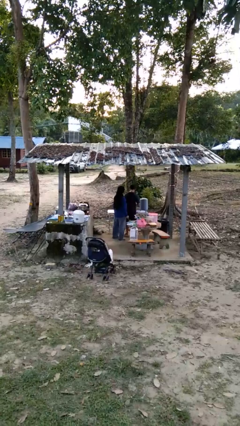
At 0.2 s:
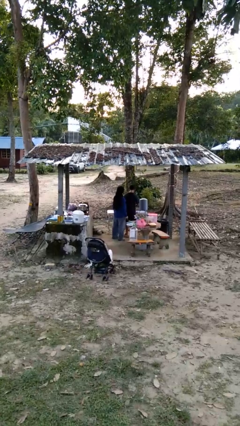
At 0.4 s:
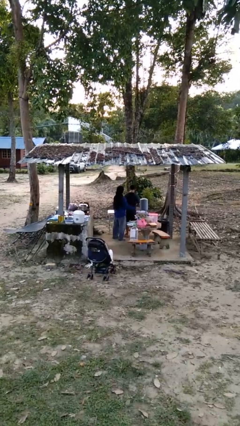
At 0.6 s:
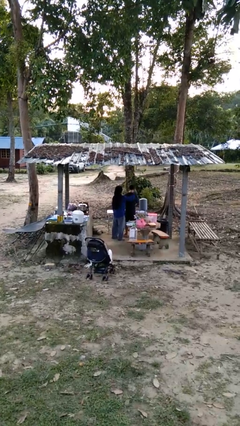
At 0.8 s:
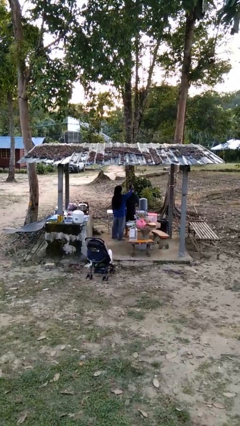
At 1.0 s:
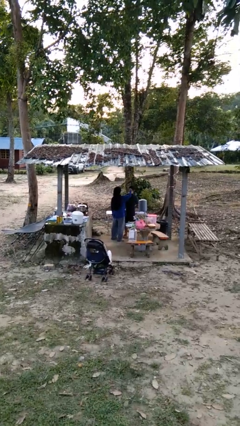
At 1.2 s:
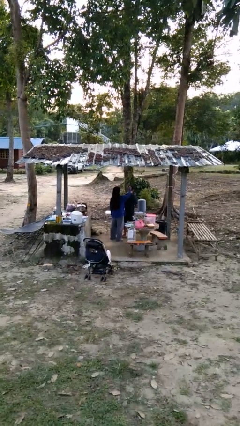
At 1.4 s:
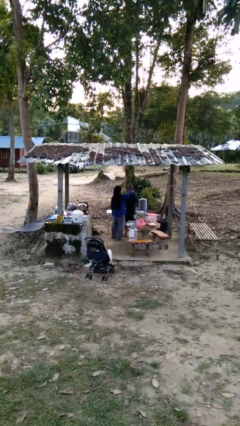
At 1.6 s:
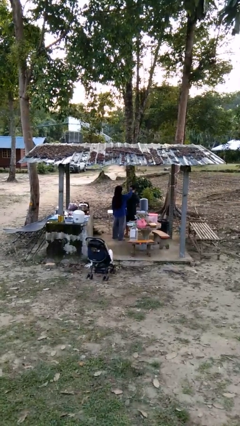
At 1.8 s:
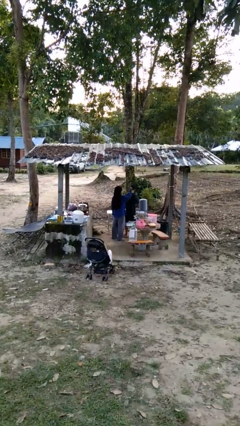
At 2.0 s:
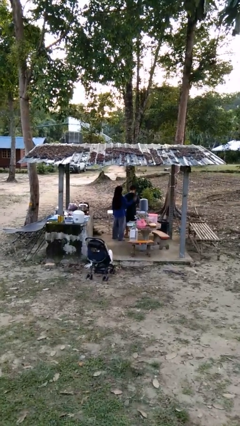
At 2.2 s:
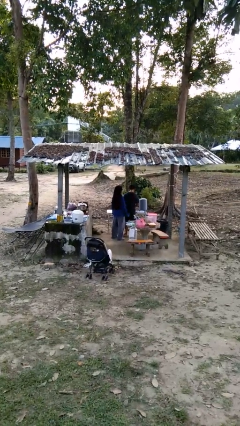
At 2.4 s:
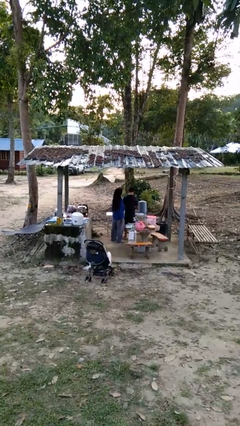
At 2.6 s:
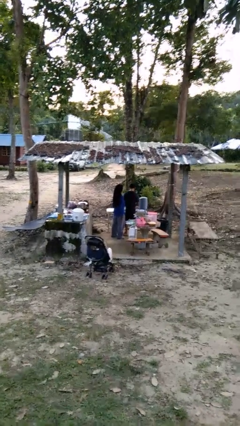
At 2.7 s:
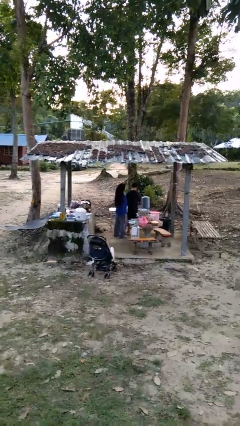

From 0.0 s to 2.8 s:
person brushes hair of person

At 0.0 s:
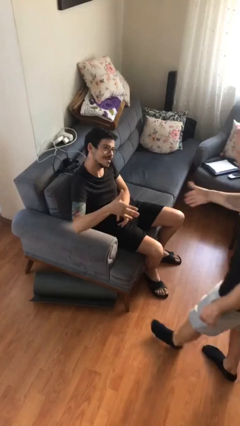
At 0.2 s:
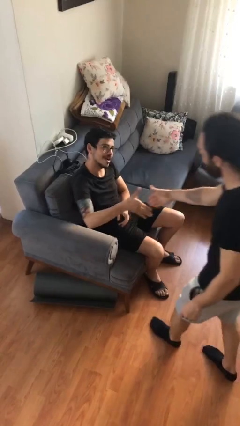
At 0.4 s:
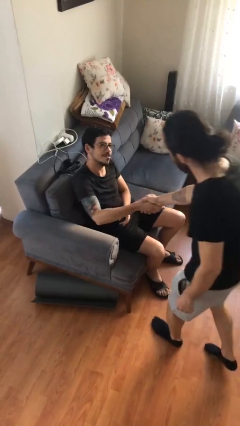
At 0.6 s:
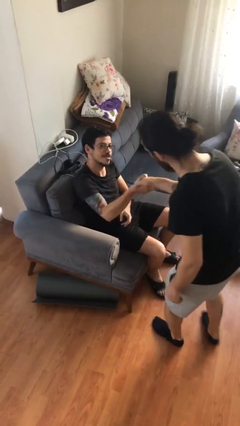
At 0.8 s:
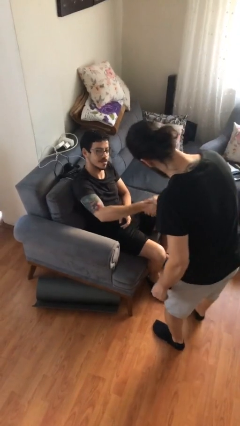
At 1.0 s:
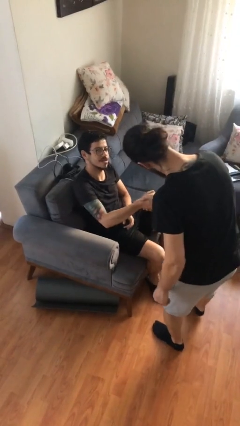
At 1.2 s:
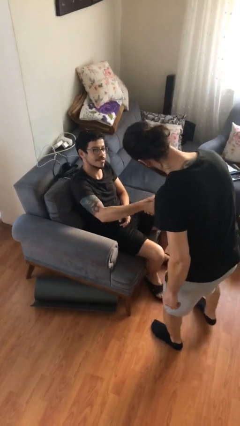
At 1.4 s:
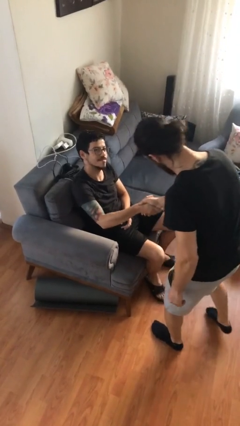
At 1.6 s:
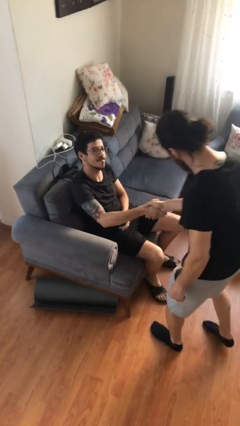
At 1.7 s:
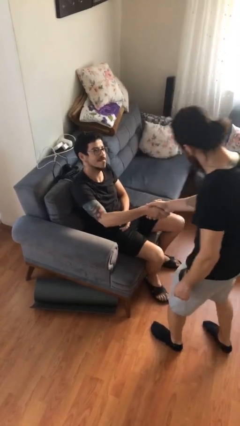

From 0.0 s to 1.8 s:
person shakes hand

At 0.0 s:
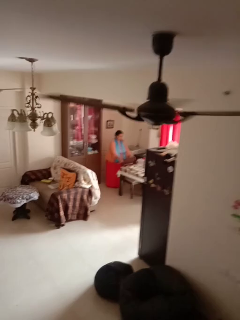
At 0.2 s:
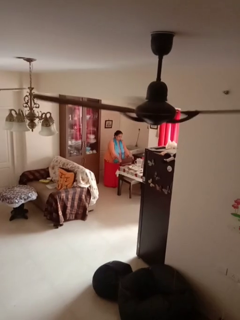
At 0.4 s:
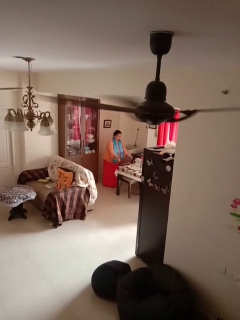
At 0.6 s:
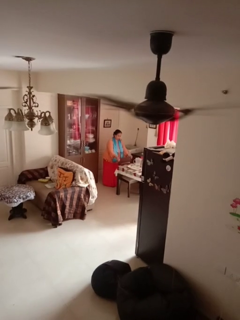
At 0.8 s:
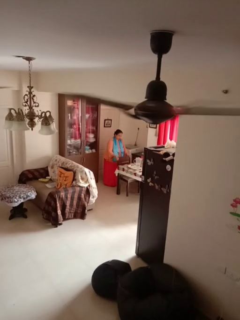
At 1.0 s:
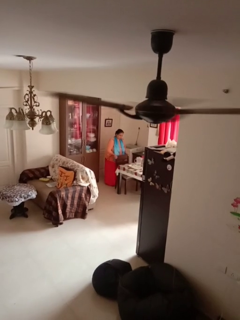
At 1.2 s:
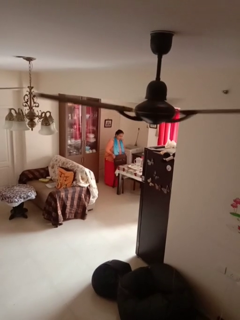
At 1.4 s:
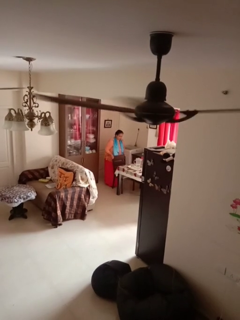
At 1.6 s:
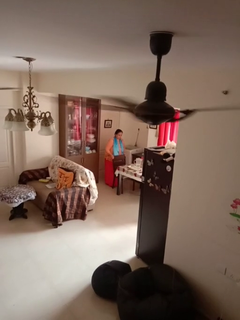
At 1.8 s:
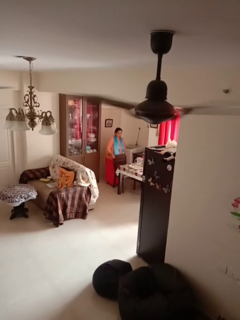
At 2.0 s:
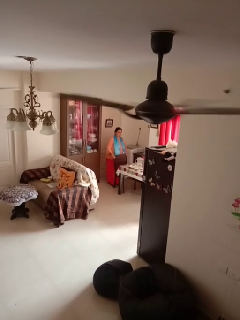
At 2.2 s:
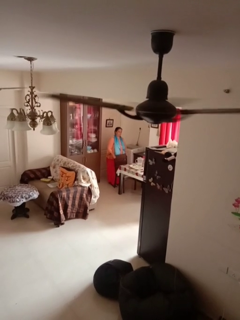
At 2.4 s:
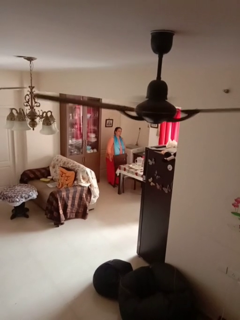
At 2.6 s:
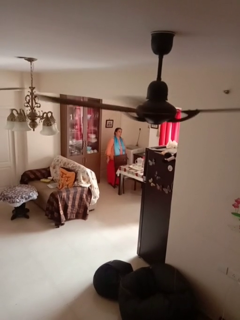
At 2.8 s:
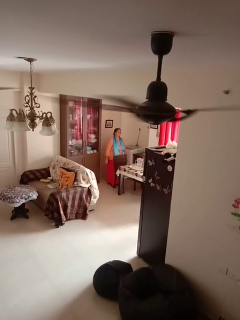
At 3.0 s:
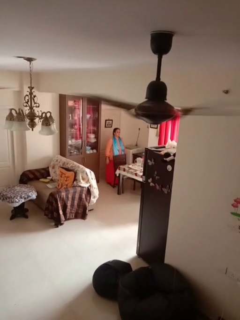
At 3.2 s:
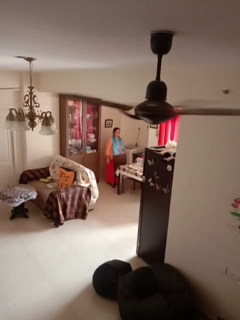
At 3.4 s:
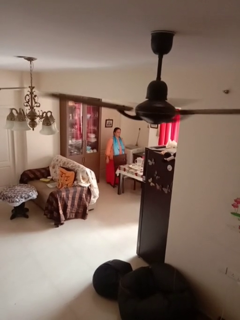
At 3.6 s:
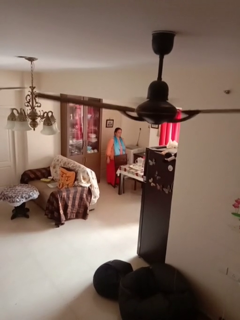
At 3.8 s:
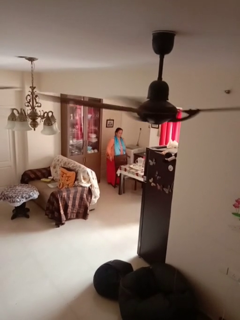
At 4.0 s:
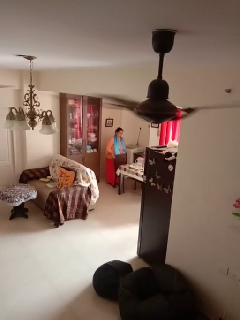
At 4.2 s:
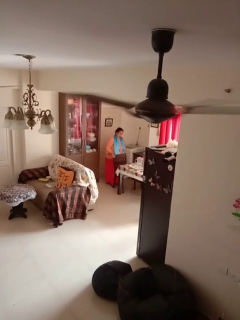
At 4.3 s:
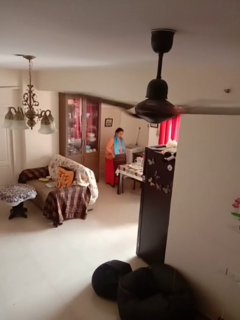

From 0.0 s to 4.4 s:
person pulls out chair

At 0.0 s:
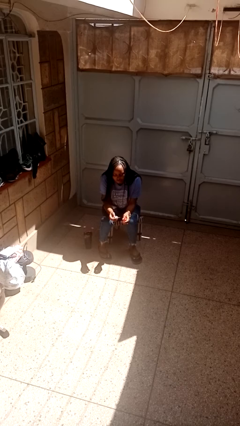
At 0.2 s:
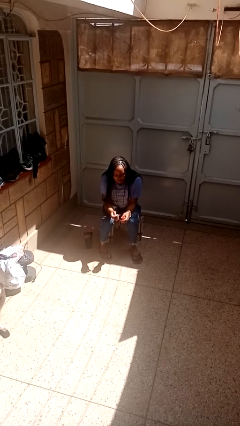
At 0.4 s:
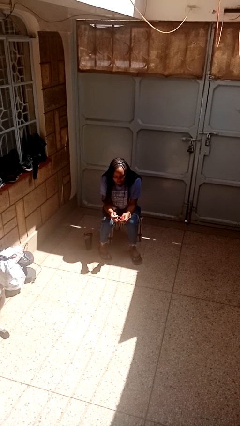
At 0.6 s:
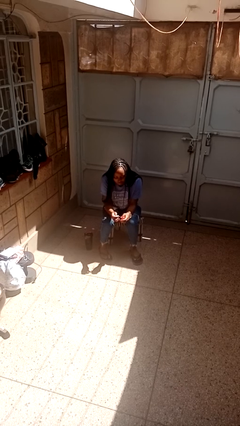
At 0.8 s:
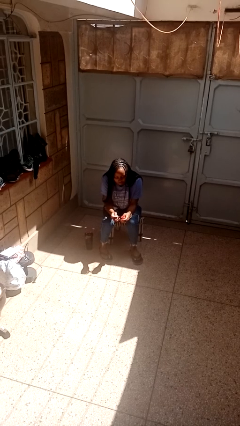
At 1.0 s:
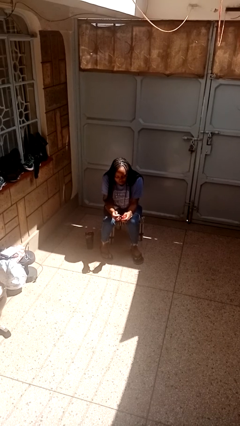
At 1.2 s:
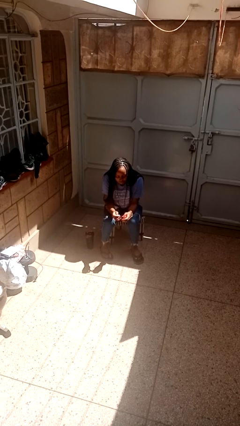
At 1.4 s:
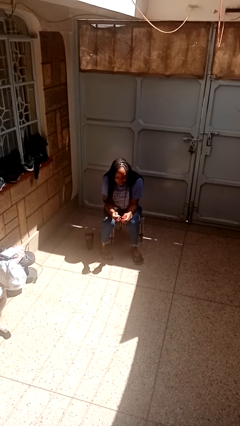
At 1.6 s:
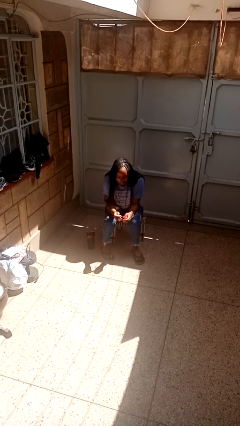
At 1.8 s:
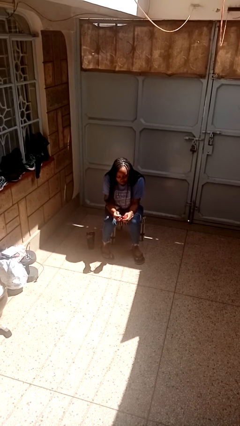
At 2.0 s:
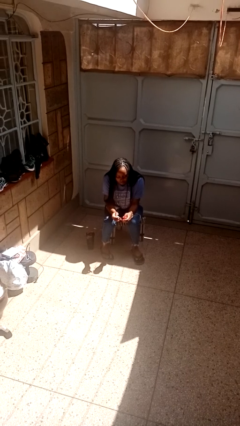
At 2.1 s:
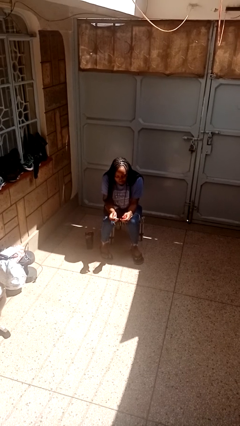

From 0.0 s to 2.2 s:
person paints fingernails

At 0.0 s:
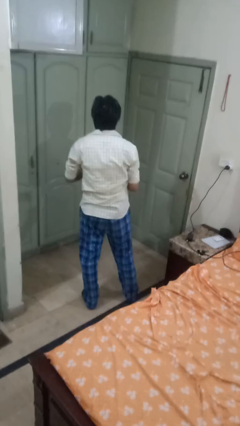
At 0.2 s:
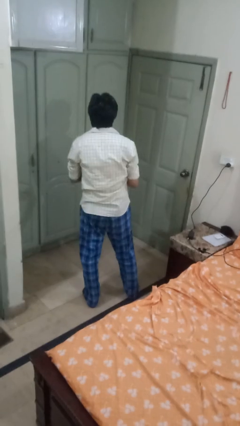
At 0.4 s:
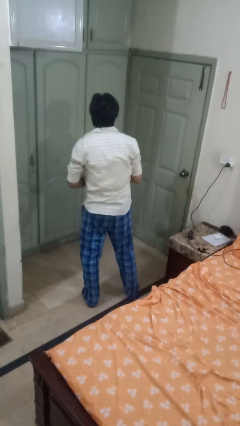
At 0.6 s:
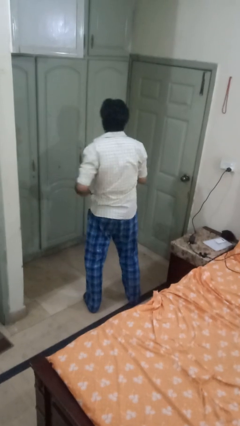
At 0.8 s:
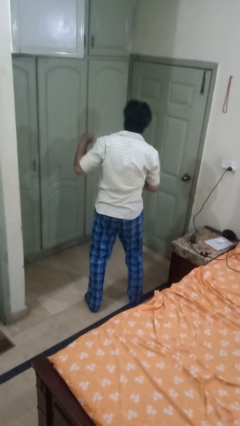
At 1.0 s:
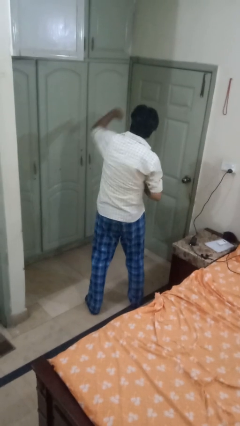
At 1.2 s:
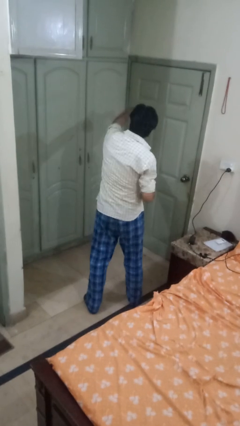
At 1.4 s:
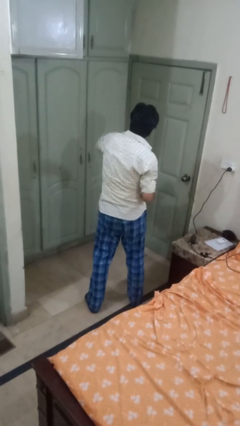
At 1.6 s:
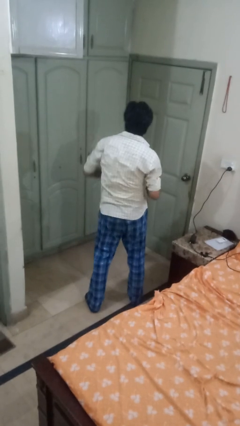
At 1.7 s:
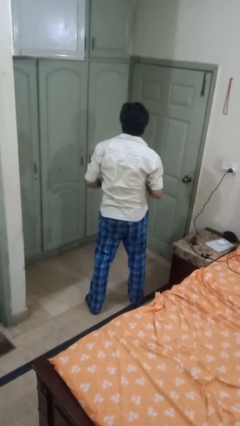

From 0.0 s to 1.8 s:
person punches

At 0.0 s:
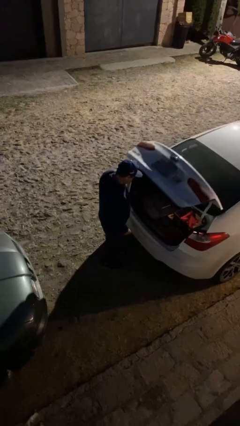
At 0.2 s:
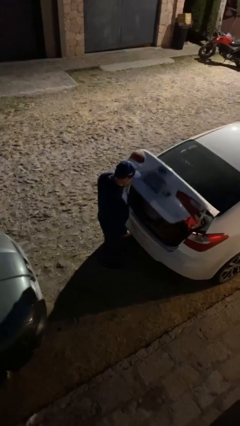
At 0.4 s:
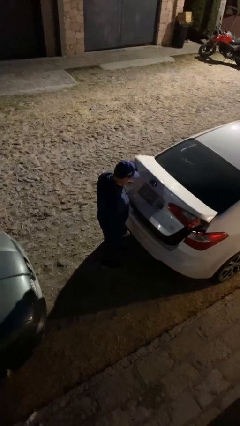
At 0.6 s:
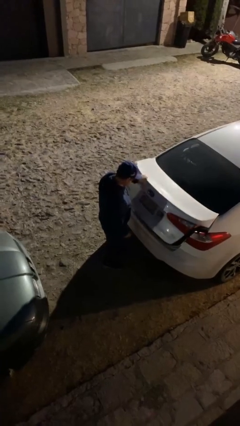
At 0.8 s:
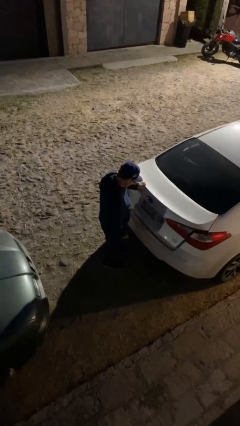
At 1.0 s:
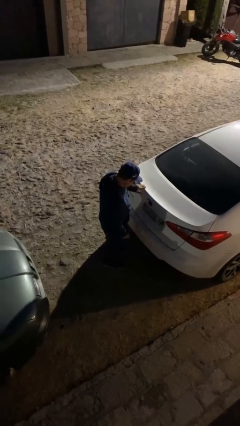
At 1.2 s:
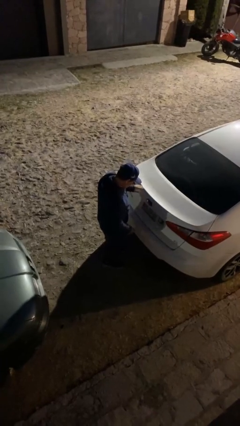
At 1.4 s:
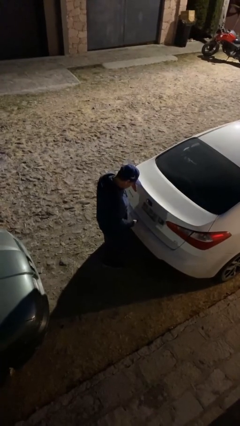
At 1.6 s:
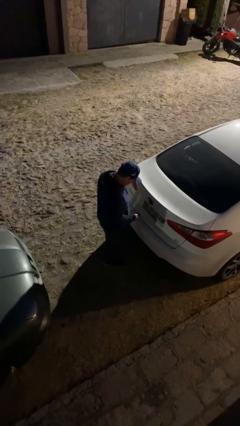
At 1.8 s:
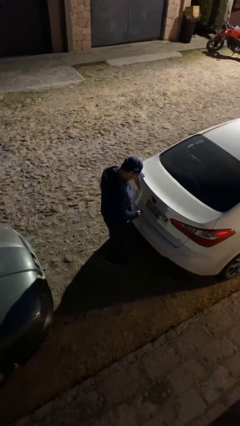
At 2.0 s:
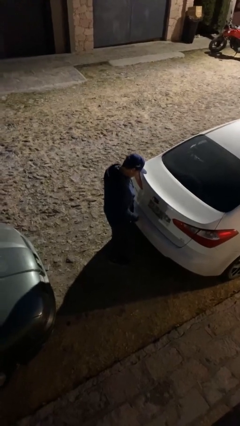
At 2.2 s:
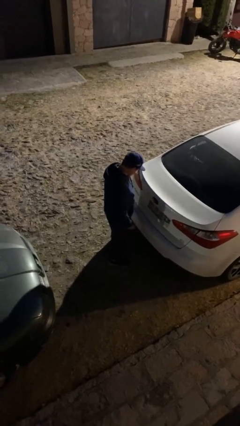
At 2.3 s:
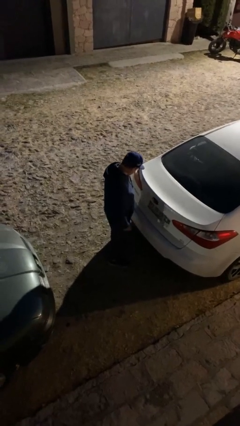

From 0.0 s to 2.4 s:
person closes car trunk

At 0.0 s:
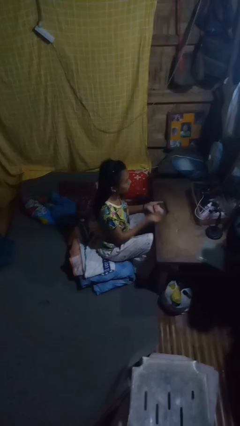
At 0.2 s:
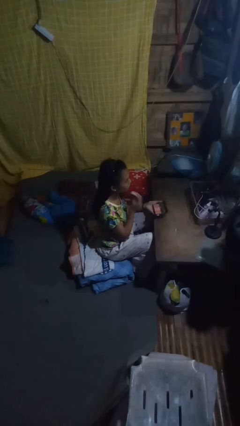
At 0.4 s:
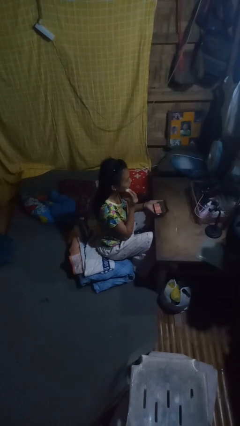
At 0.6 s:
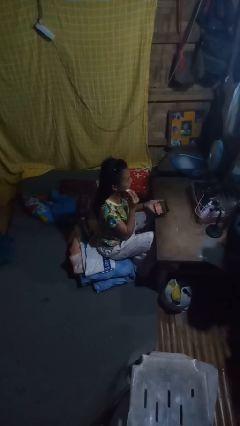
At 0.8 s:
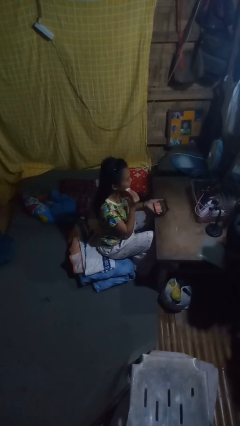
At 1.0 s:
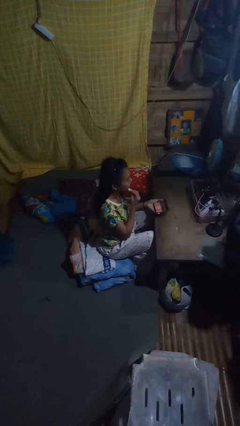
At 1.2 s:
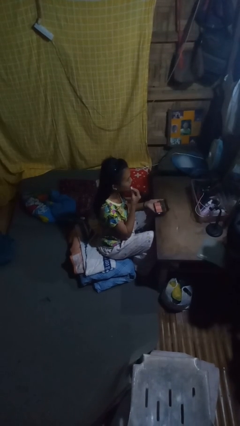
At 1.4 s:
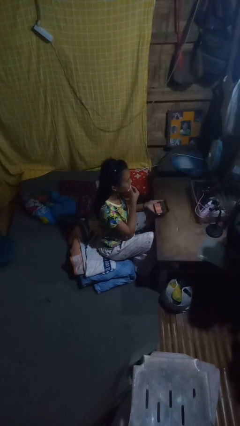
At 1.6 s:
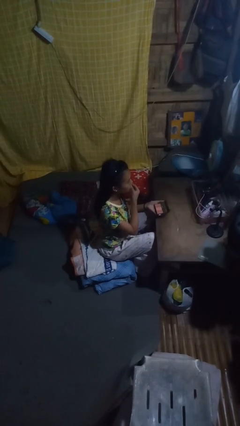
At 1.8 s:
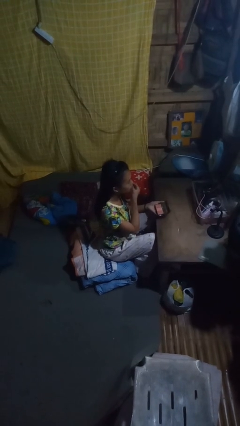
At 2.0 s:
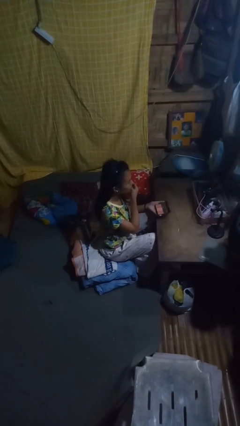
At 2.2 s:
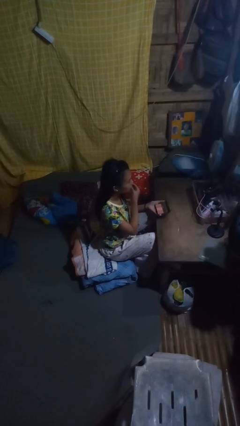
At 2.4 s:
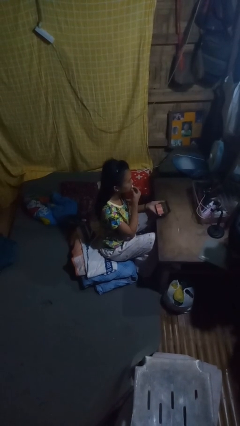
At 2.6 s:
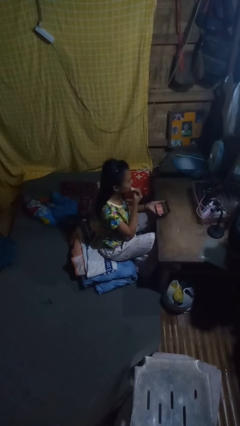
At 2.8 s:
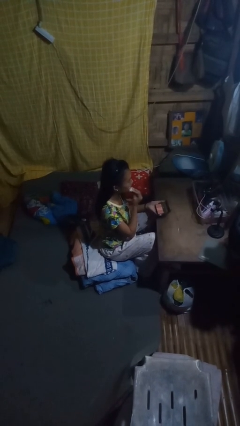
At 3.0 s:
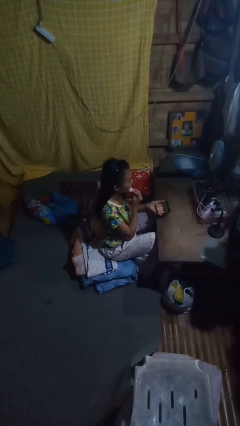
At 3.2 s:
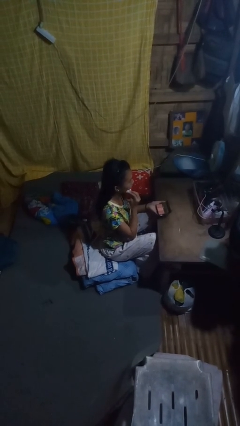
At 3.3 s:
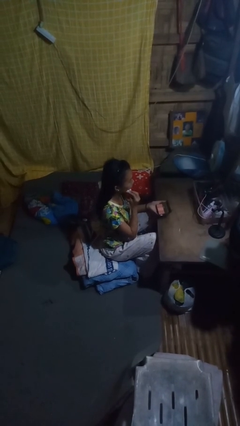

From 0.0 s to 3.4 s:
person applies foundation makeup
